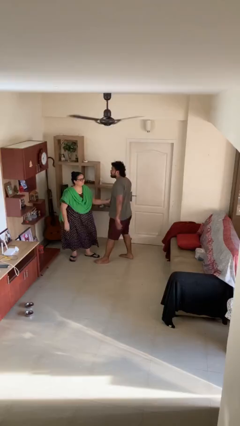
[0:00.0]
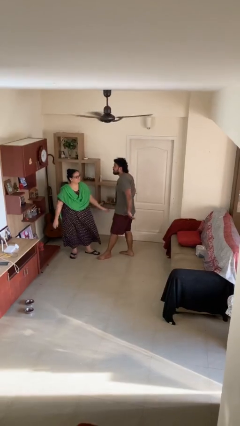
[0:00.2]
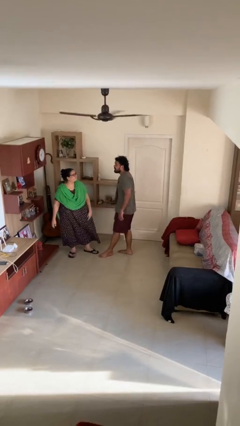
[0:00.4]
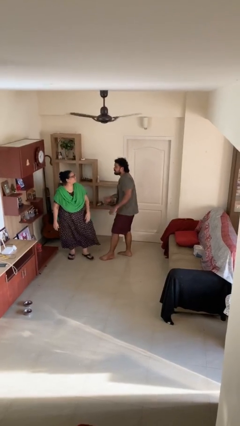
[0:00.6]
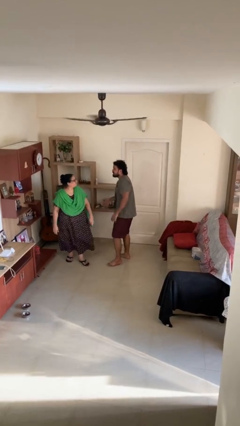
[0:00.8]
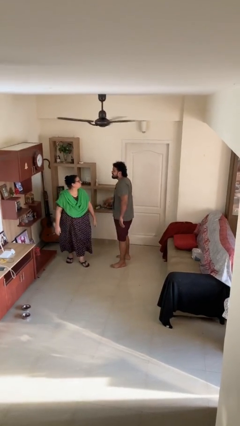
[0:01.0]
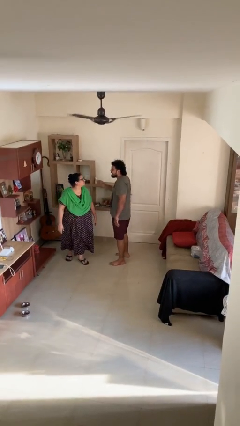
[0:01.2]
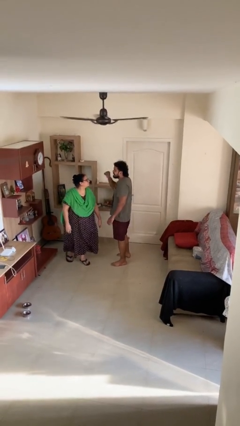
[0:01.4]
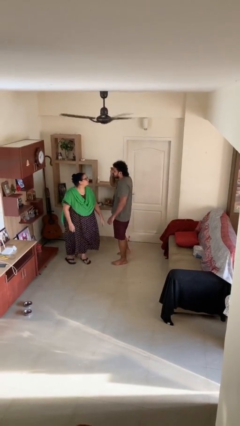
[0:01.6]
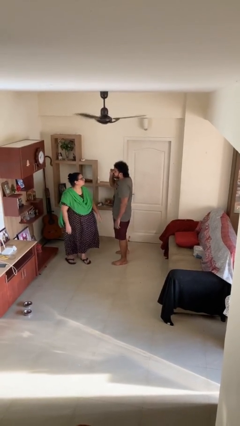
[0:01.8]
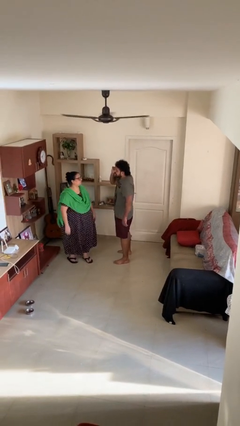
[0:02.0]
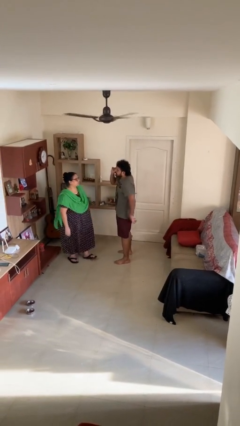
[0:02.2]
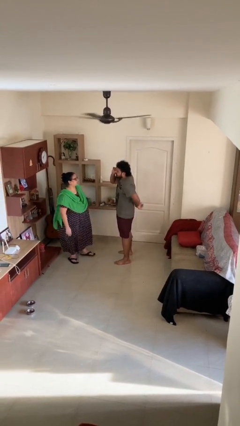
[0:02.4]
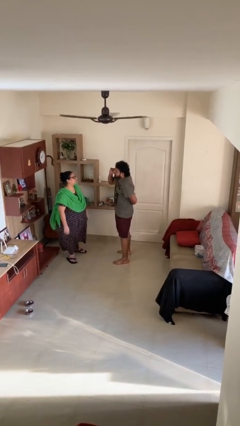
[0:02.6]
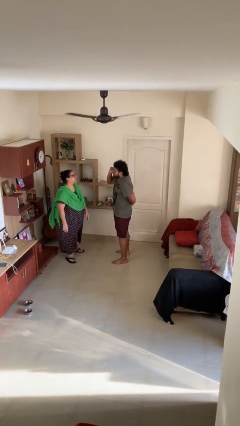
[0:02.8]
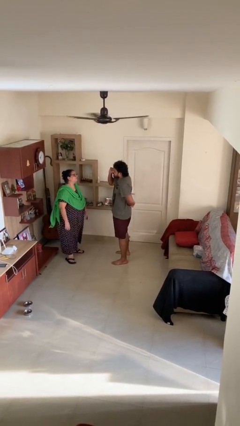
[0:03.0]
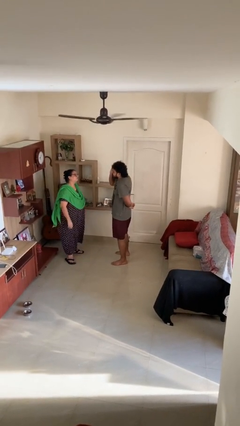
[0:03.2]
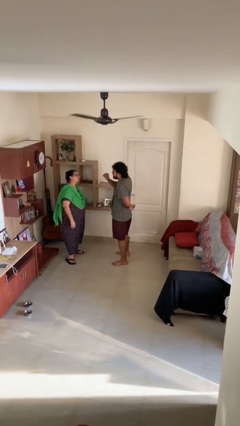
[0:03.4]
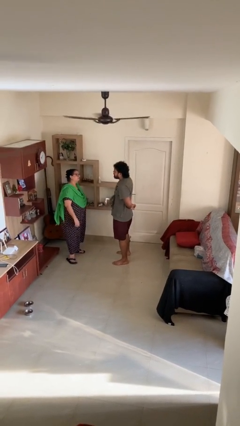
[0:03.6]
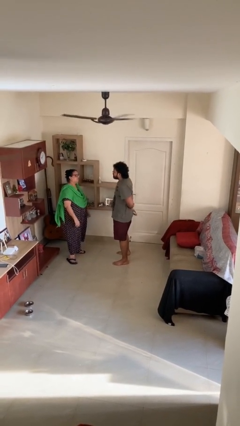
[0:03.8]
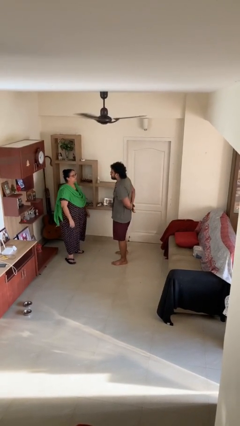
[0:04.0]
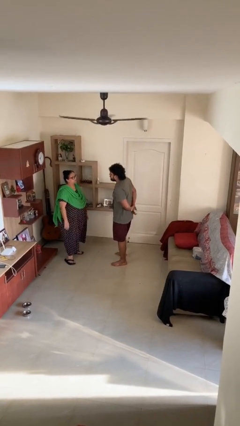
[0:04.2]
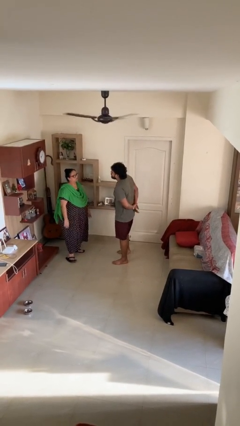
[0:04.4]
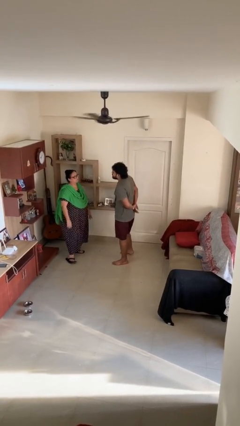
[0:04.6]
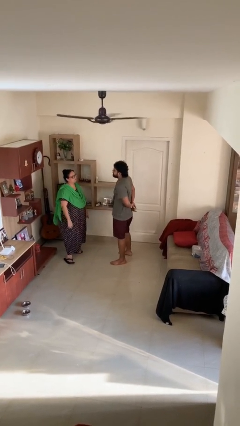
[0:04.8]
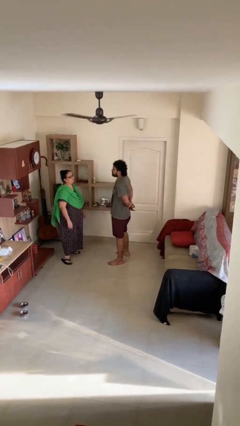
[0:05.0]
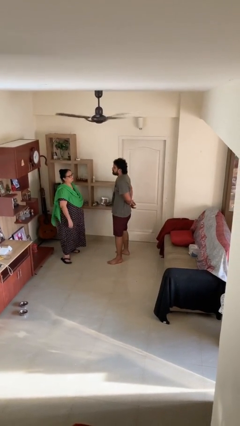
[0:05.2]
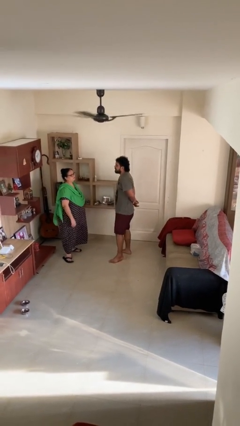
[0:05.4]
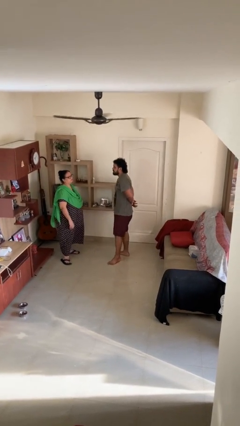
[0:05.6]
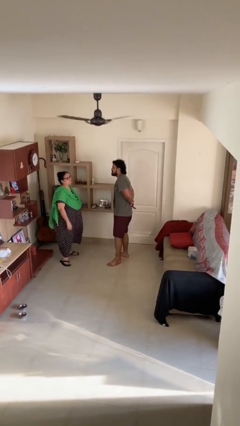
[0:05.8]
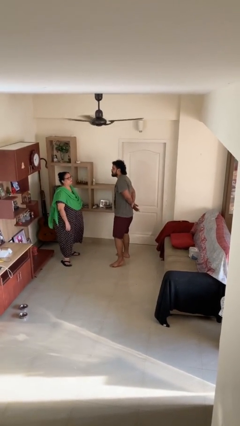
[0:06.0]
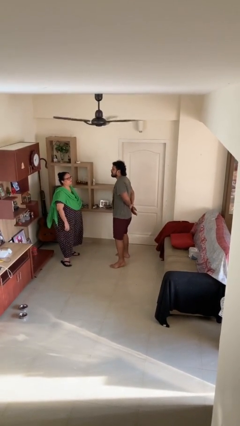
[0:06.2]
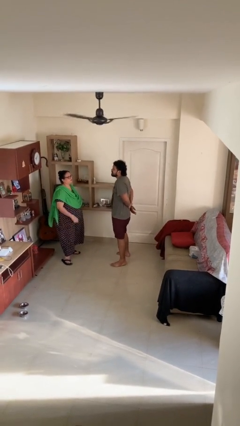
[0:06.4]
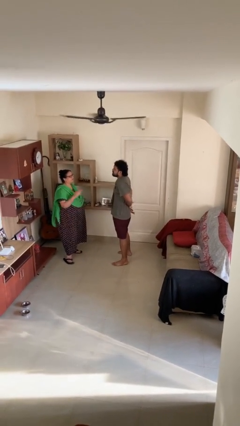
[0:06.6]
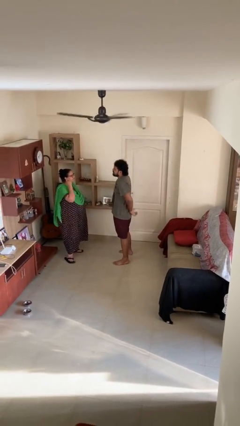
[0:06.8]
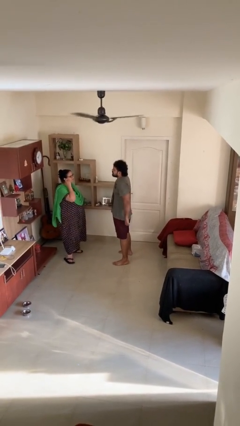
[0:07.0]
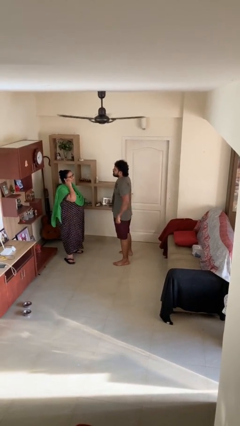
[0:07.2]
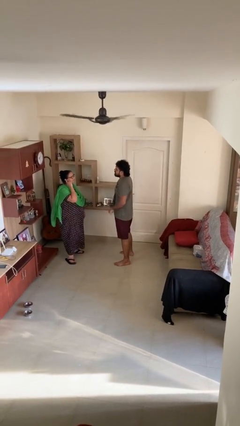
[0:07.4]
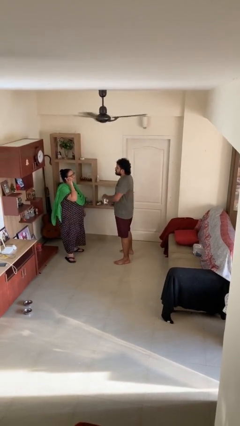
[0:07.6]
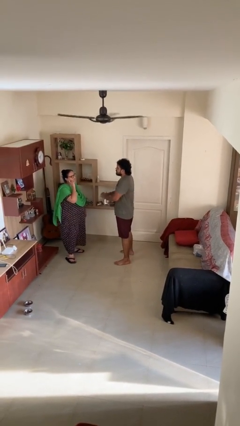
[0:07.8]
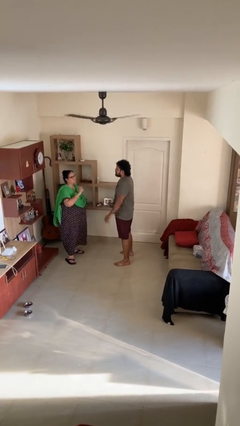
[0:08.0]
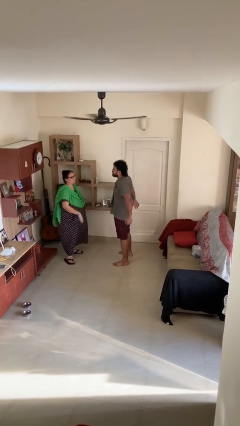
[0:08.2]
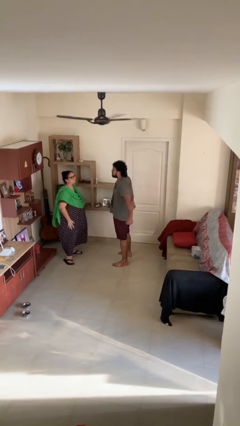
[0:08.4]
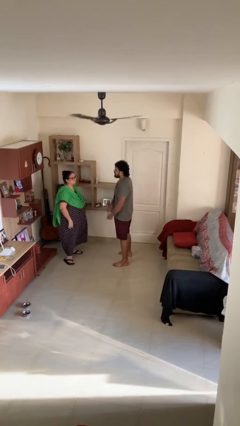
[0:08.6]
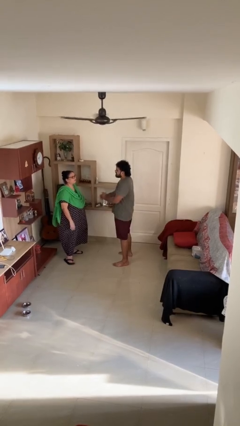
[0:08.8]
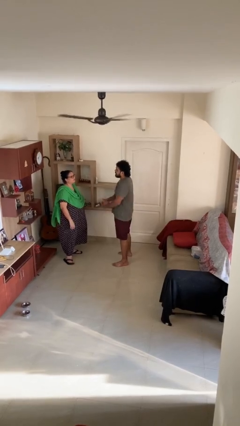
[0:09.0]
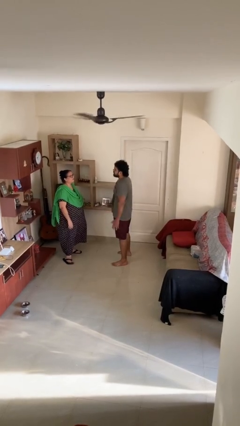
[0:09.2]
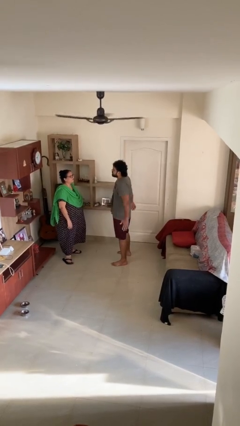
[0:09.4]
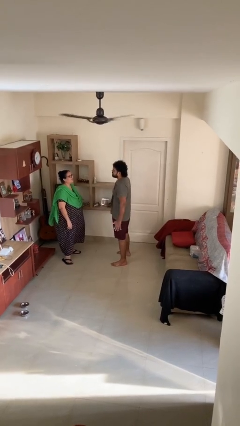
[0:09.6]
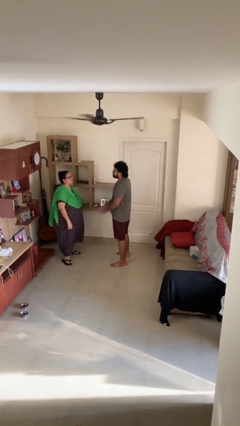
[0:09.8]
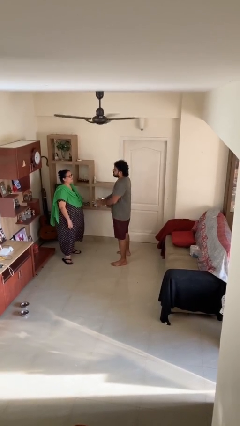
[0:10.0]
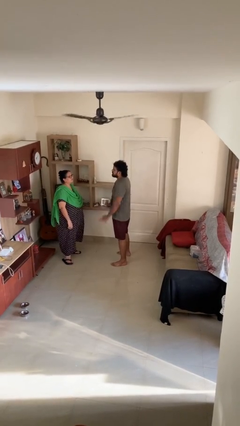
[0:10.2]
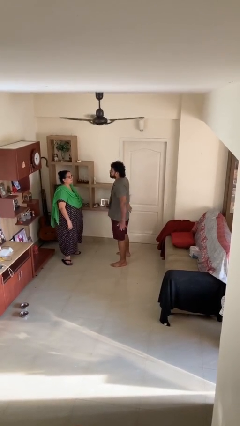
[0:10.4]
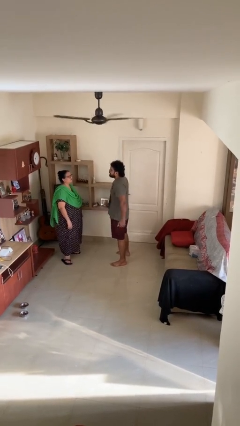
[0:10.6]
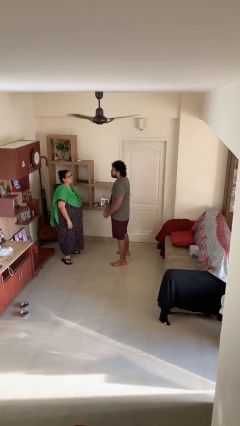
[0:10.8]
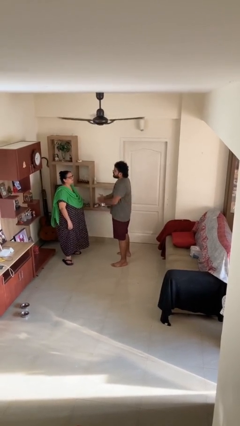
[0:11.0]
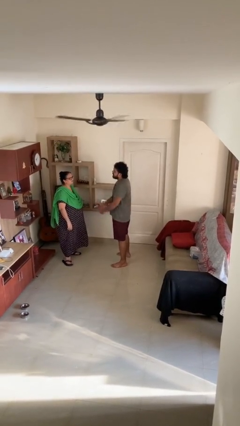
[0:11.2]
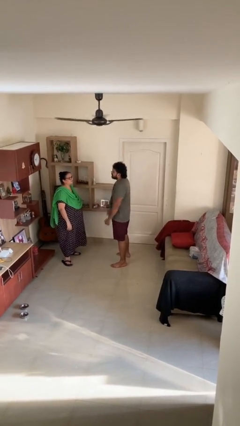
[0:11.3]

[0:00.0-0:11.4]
person talks to person

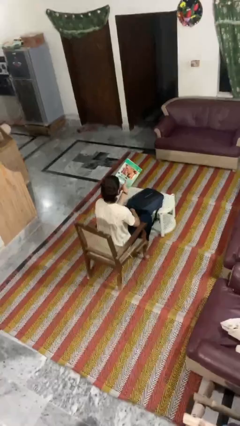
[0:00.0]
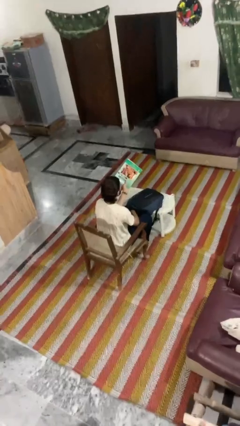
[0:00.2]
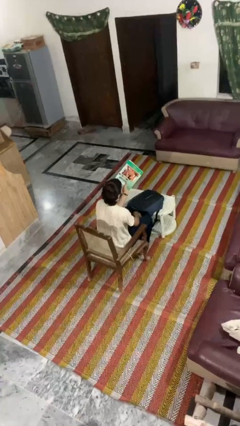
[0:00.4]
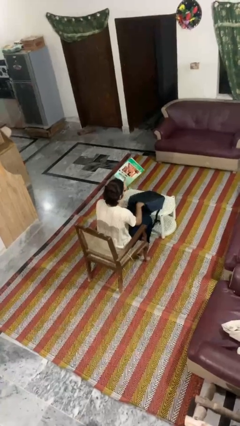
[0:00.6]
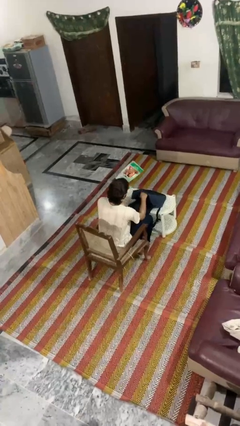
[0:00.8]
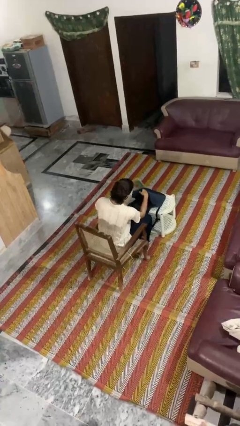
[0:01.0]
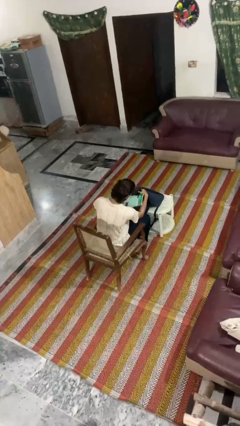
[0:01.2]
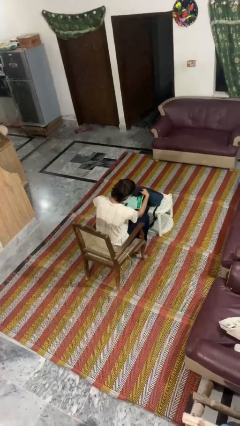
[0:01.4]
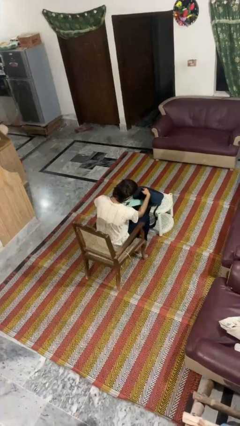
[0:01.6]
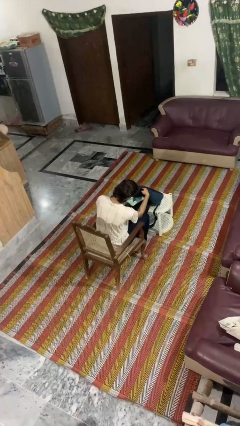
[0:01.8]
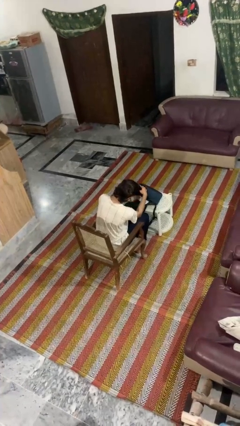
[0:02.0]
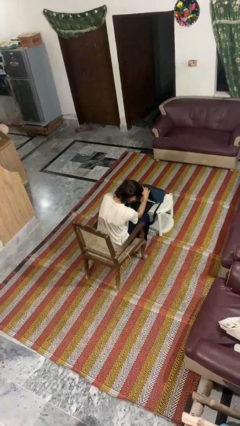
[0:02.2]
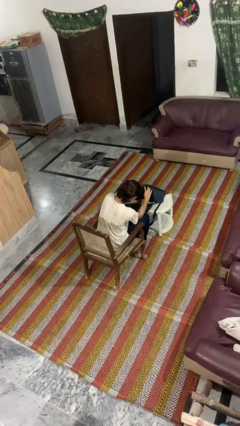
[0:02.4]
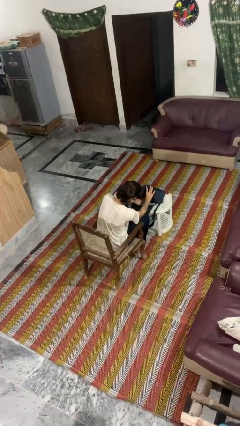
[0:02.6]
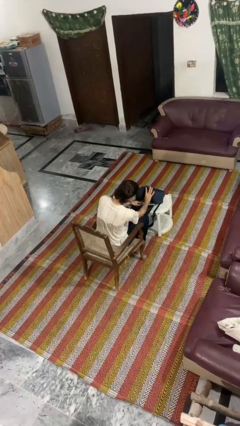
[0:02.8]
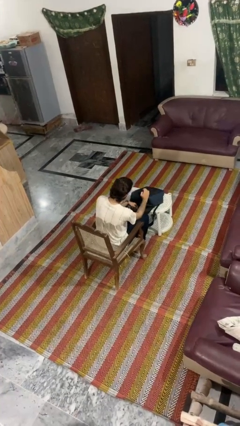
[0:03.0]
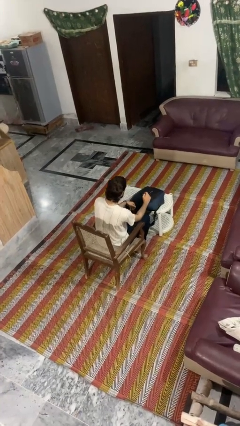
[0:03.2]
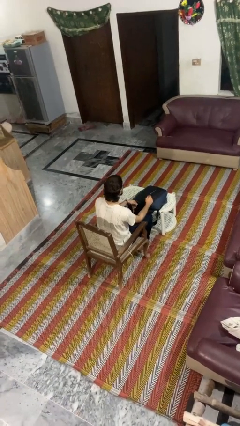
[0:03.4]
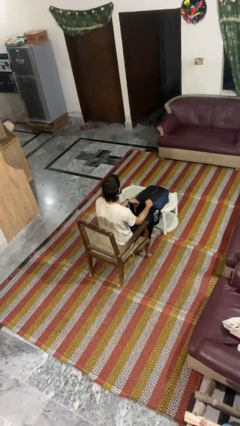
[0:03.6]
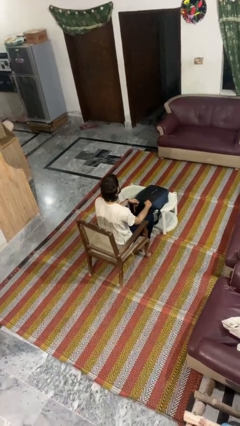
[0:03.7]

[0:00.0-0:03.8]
person puts object into backpack

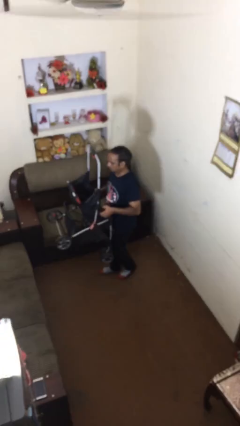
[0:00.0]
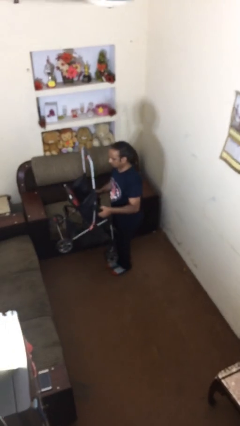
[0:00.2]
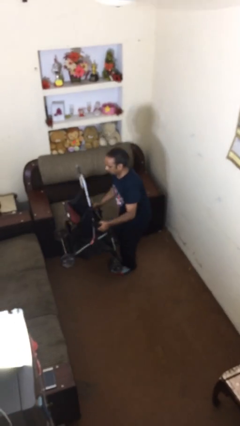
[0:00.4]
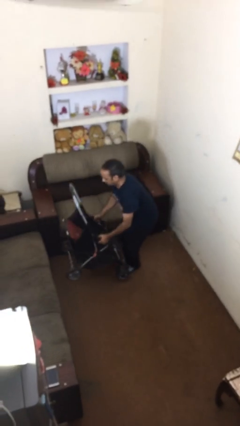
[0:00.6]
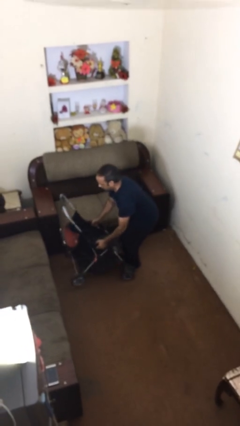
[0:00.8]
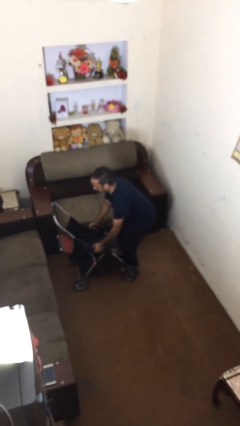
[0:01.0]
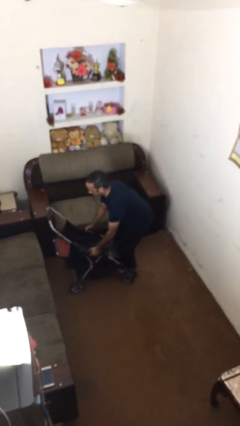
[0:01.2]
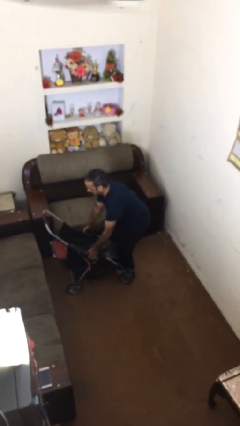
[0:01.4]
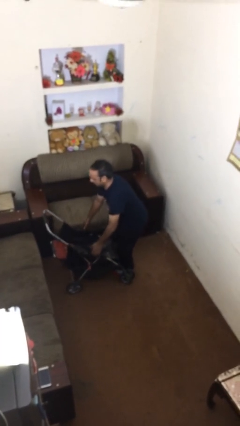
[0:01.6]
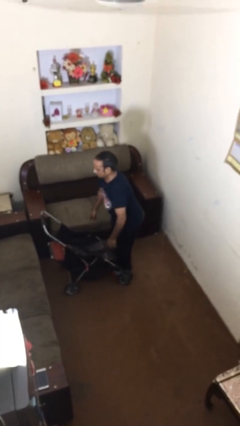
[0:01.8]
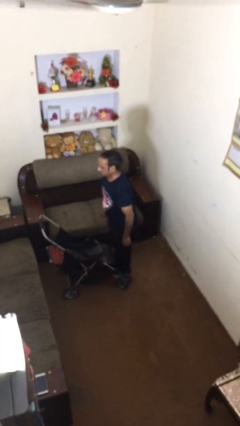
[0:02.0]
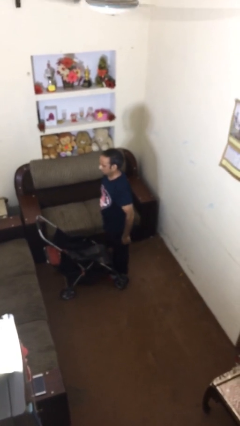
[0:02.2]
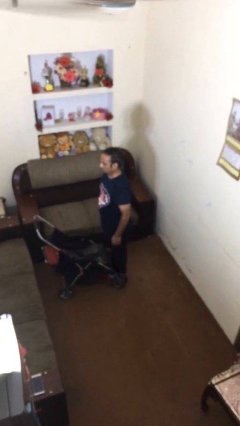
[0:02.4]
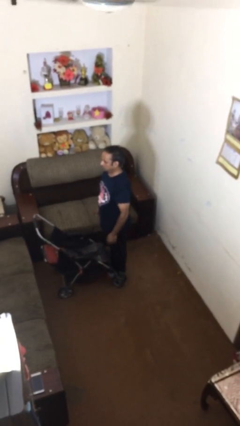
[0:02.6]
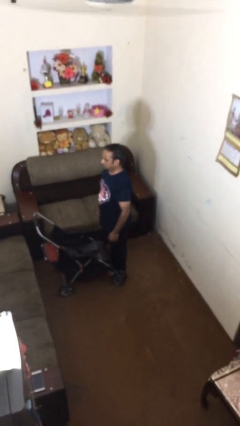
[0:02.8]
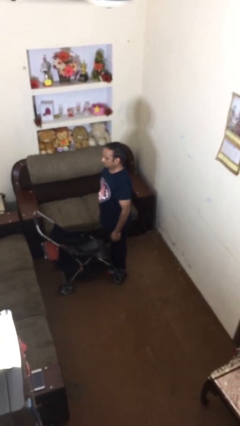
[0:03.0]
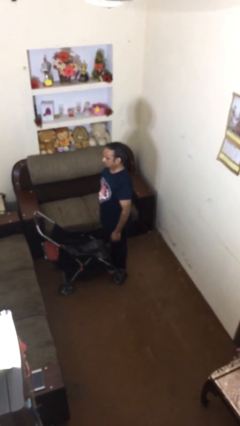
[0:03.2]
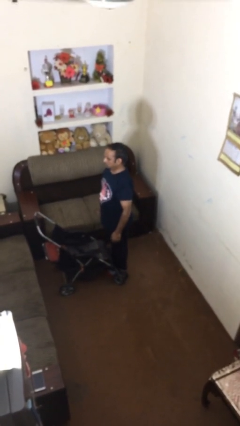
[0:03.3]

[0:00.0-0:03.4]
person puts down object on floor
